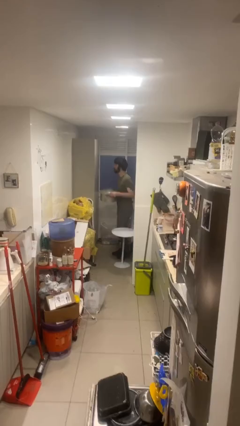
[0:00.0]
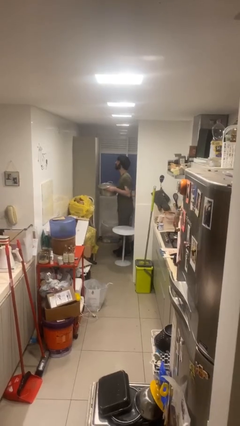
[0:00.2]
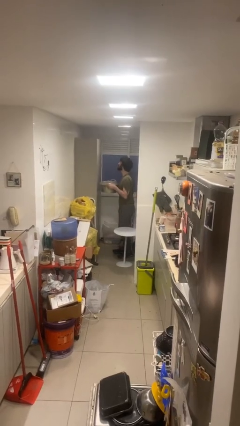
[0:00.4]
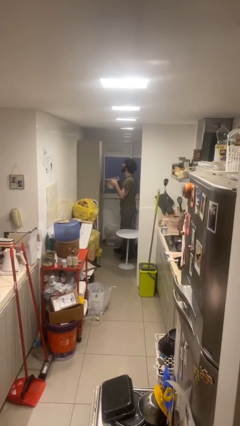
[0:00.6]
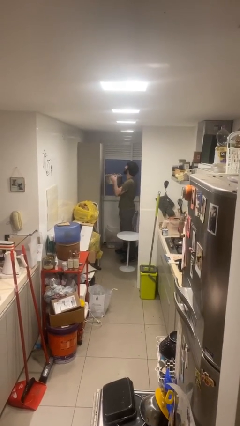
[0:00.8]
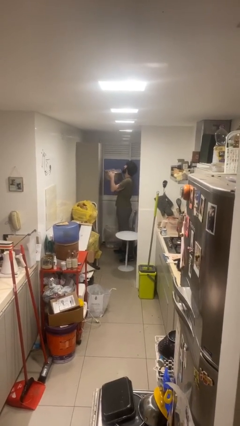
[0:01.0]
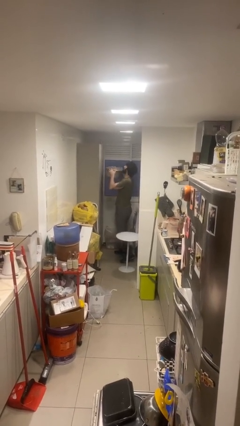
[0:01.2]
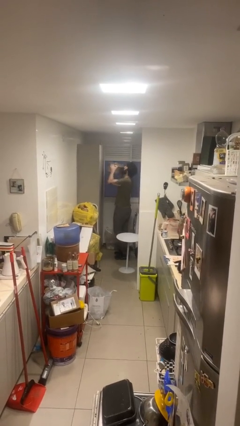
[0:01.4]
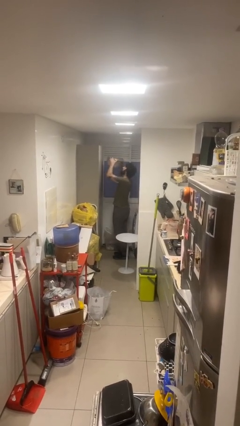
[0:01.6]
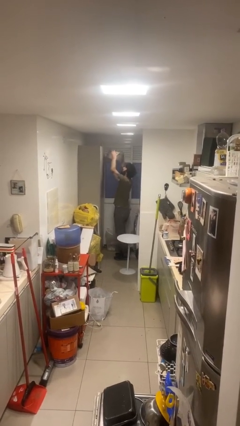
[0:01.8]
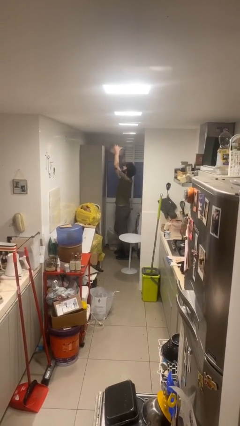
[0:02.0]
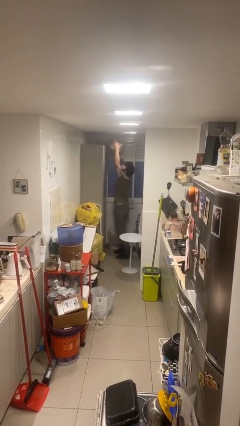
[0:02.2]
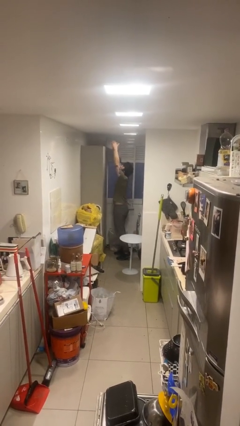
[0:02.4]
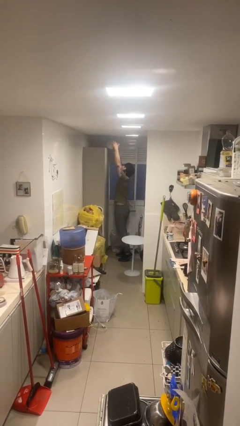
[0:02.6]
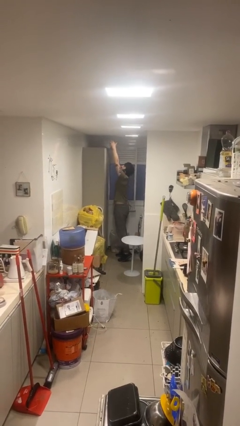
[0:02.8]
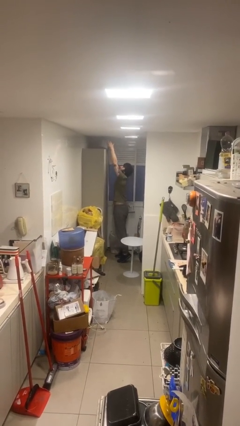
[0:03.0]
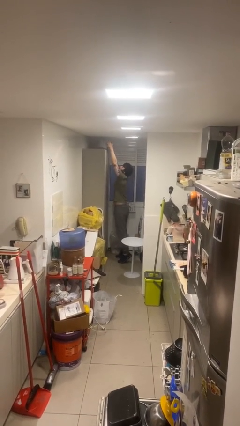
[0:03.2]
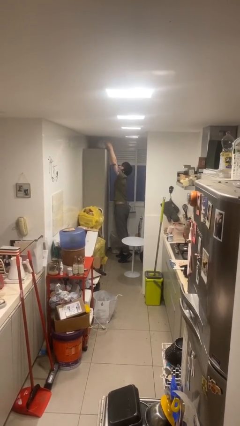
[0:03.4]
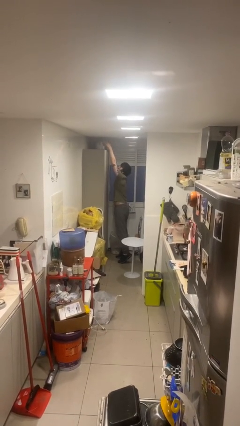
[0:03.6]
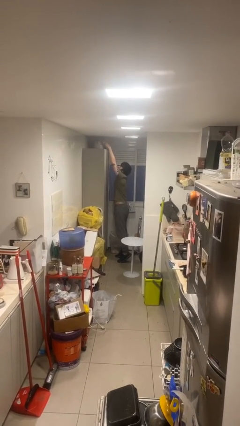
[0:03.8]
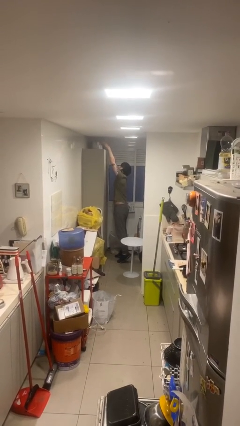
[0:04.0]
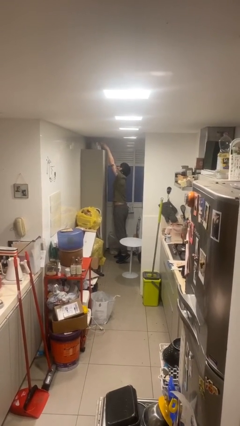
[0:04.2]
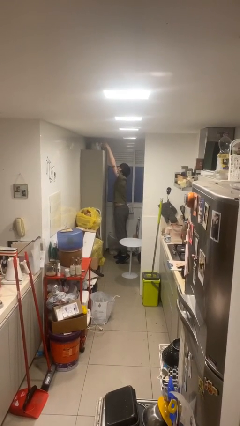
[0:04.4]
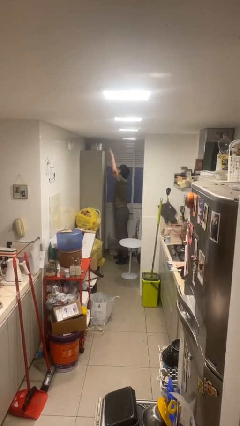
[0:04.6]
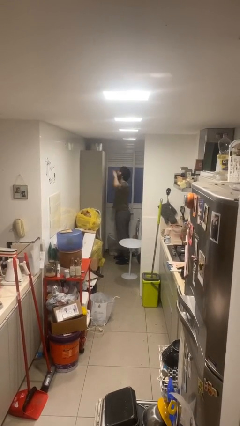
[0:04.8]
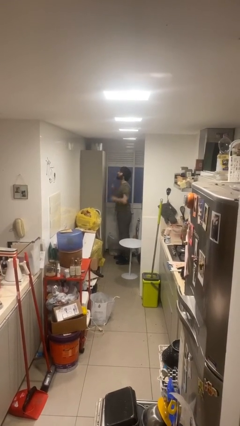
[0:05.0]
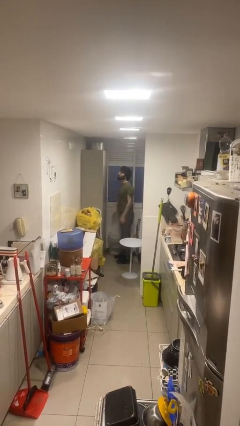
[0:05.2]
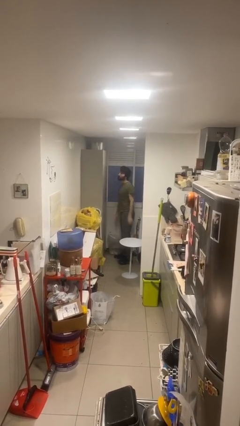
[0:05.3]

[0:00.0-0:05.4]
person puts down object on shelf

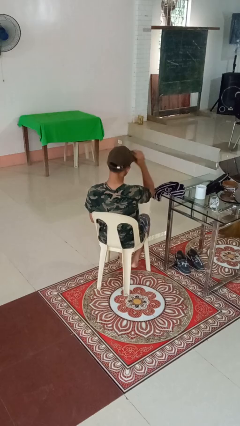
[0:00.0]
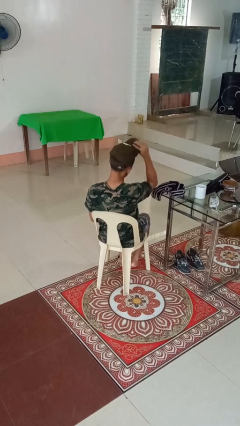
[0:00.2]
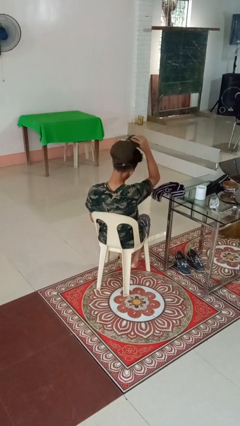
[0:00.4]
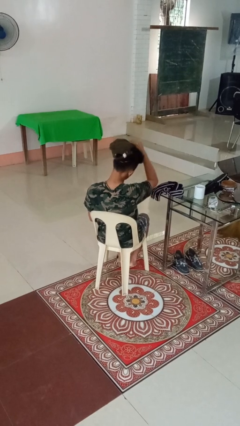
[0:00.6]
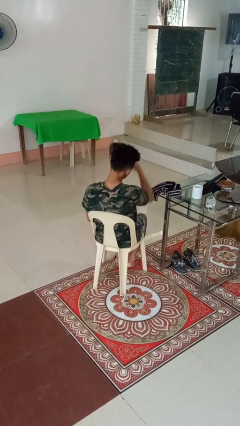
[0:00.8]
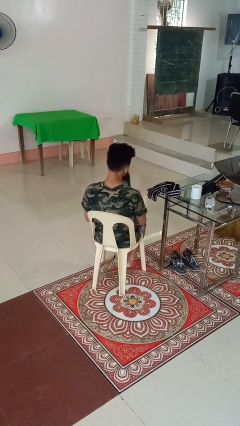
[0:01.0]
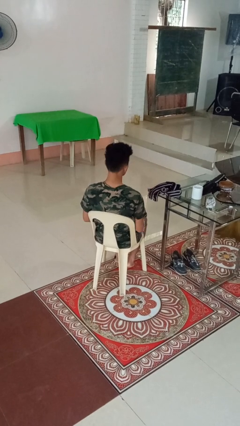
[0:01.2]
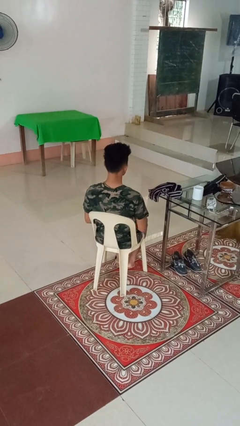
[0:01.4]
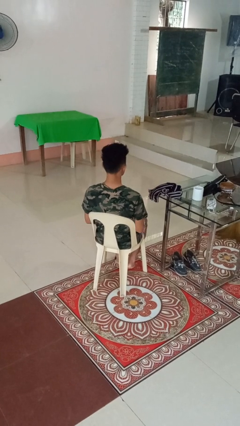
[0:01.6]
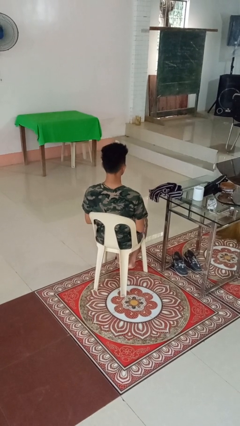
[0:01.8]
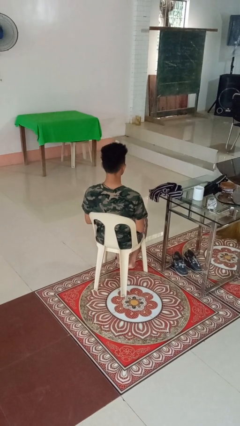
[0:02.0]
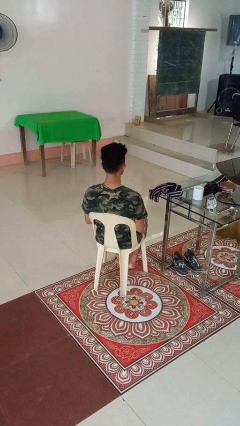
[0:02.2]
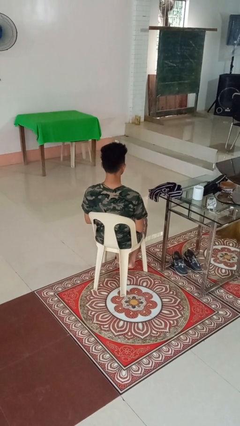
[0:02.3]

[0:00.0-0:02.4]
person takes off hat

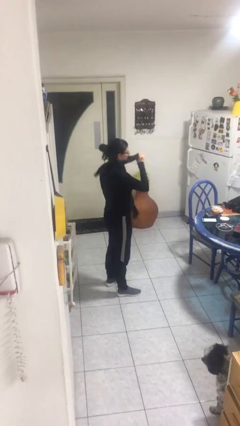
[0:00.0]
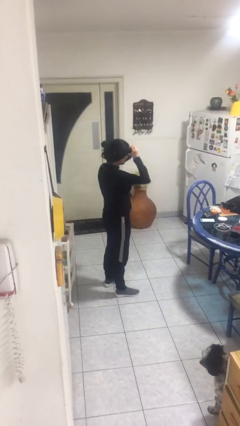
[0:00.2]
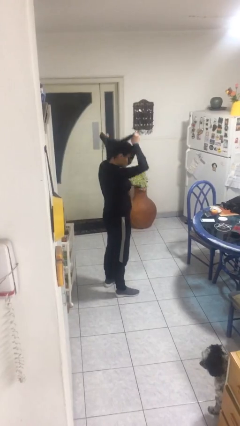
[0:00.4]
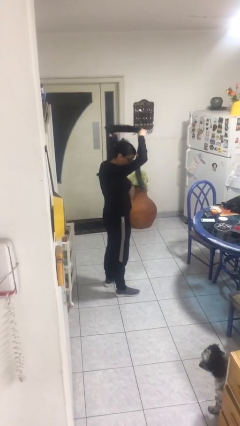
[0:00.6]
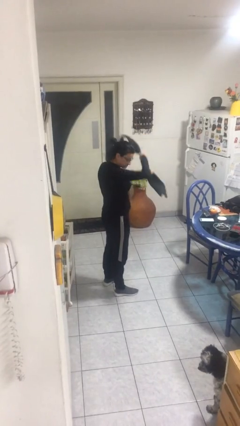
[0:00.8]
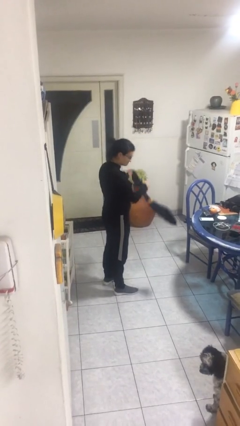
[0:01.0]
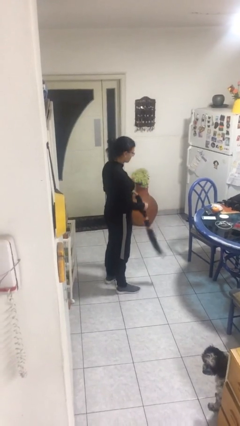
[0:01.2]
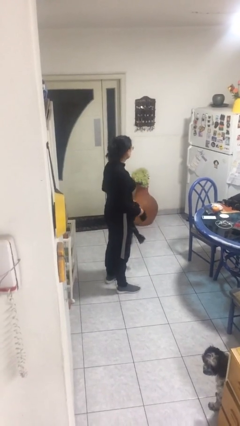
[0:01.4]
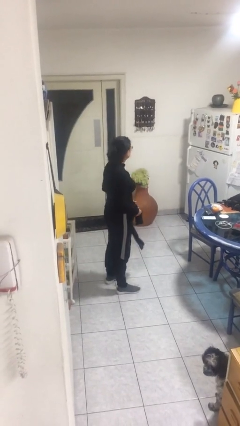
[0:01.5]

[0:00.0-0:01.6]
person takes off scarf

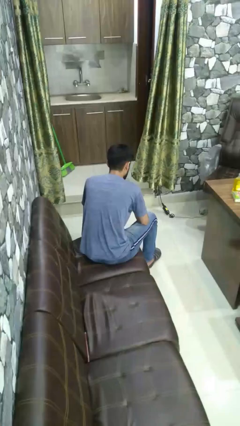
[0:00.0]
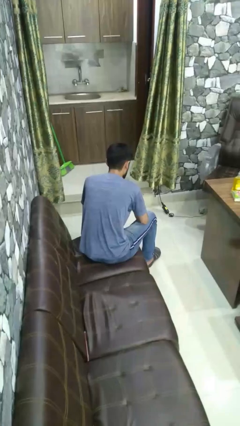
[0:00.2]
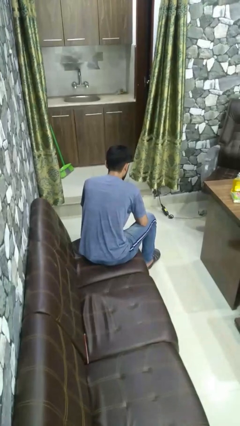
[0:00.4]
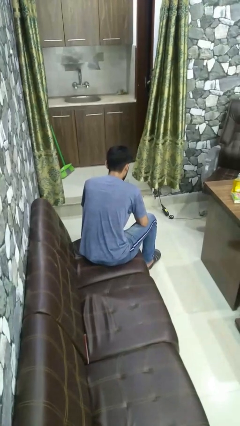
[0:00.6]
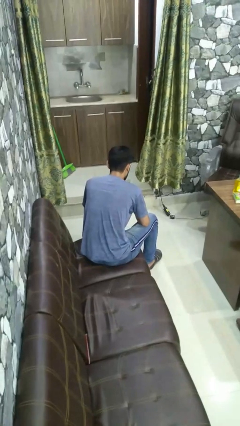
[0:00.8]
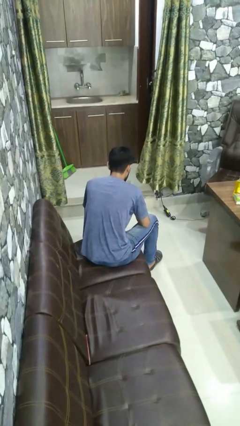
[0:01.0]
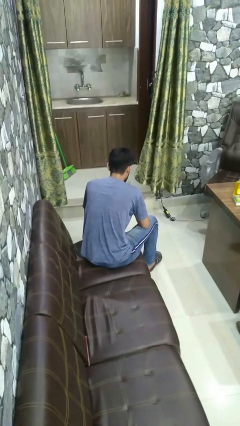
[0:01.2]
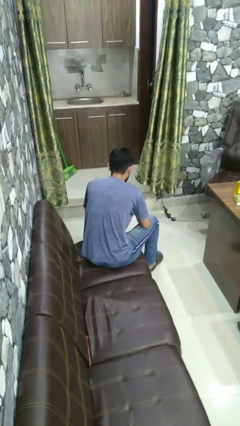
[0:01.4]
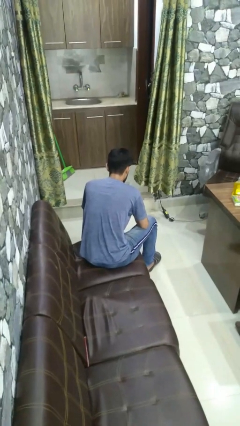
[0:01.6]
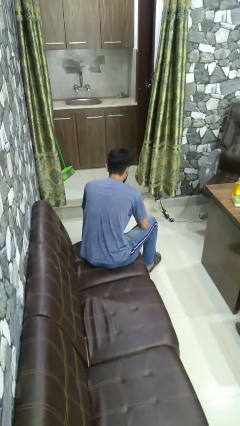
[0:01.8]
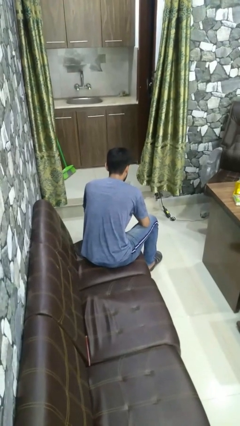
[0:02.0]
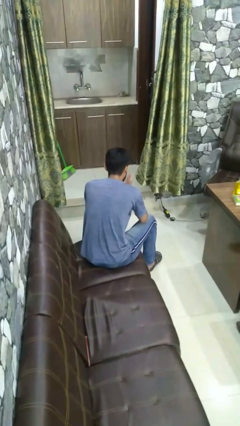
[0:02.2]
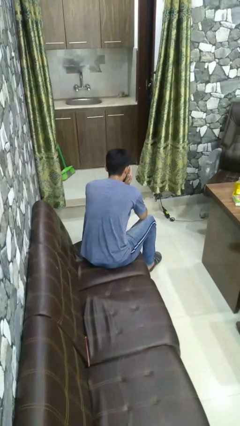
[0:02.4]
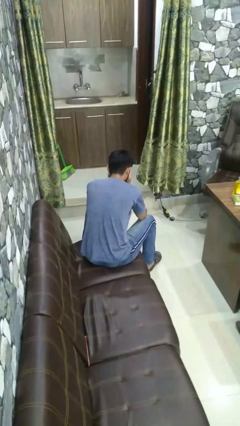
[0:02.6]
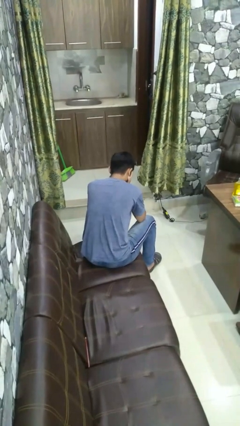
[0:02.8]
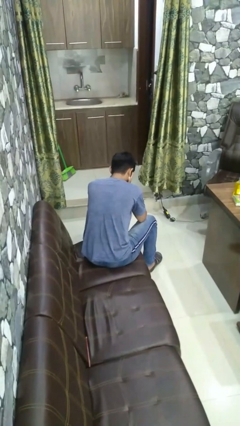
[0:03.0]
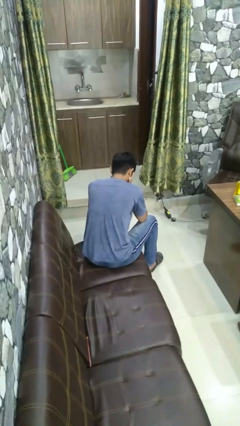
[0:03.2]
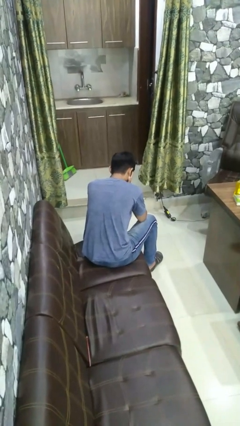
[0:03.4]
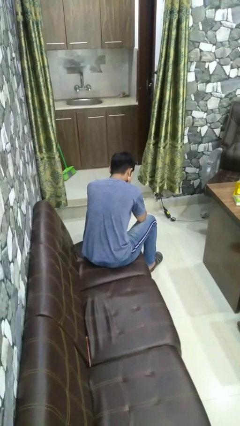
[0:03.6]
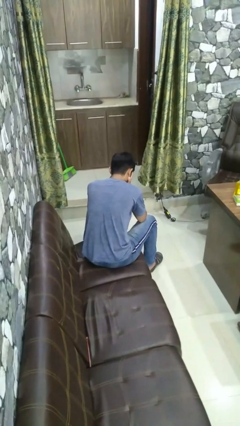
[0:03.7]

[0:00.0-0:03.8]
person covers face with hands

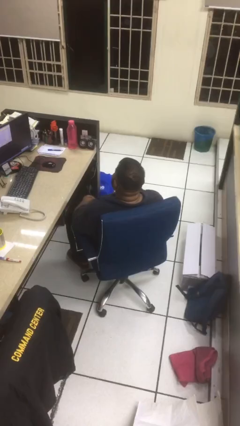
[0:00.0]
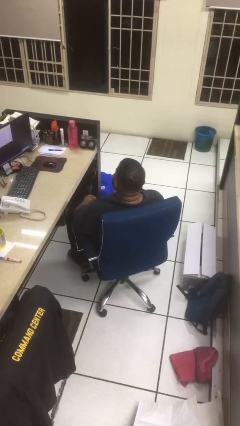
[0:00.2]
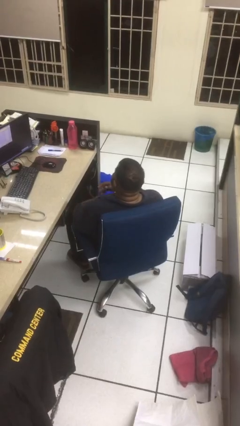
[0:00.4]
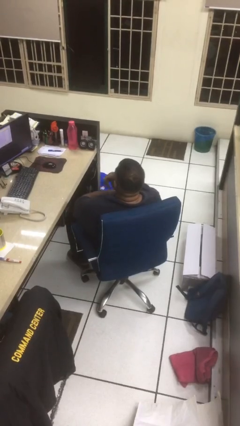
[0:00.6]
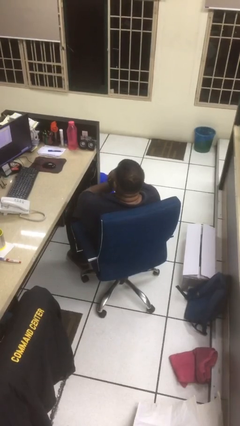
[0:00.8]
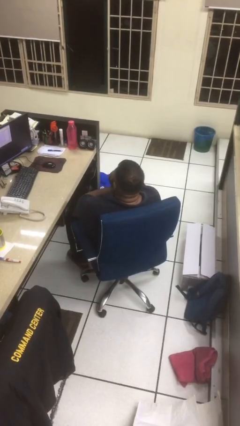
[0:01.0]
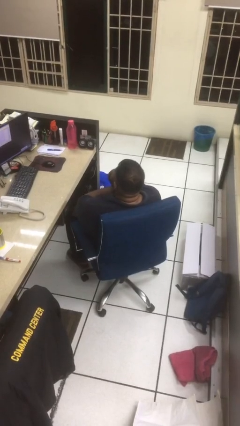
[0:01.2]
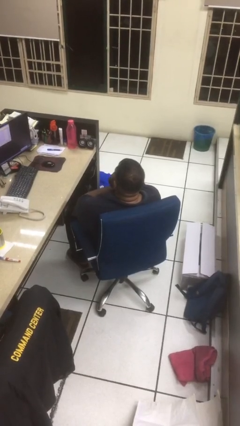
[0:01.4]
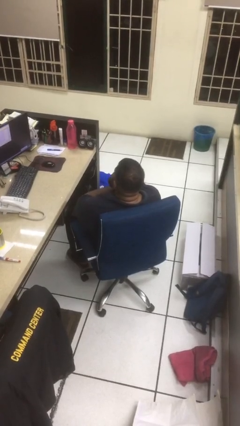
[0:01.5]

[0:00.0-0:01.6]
person strokes chin

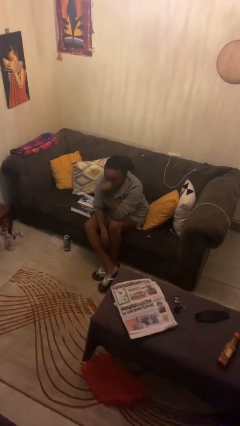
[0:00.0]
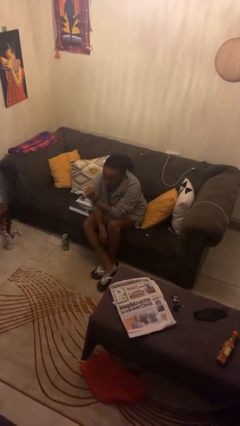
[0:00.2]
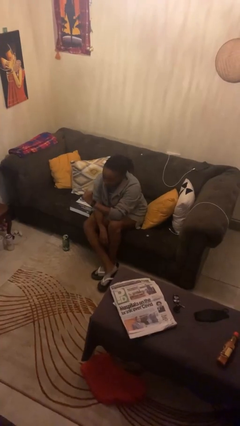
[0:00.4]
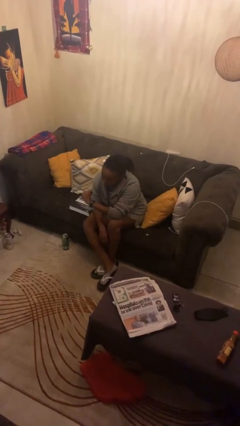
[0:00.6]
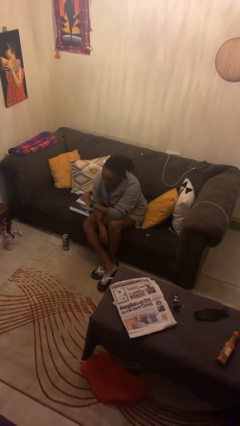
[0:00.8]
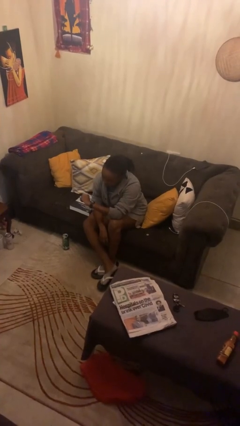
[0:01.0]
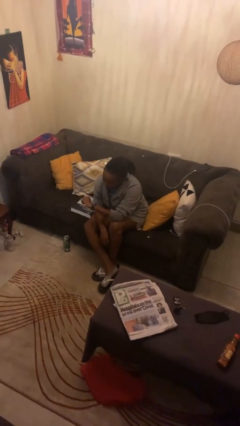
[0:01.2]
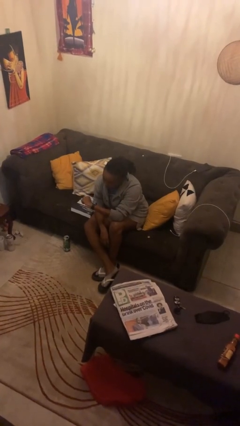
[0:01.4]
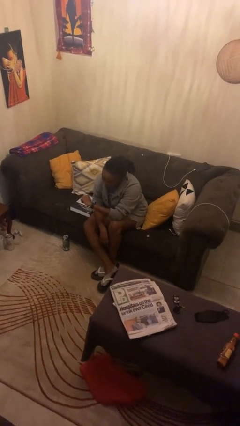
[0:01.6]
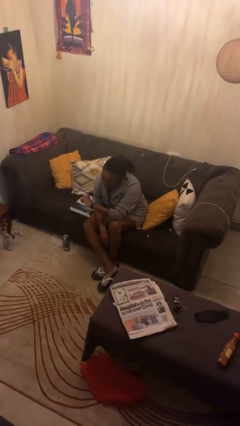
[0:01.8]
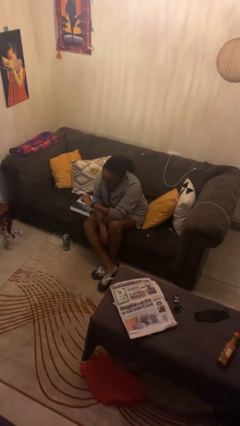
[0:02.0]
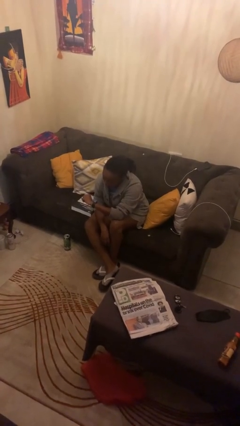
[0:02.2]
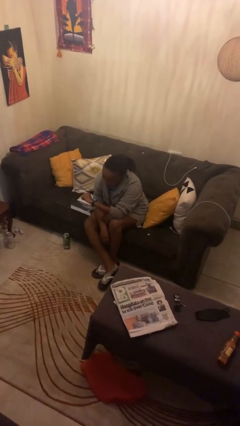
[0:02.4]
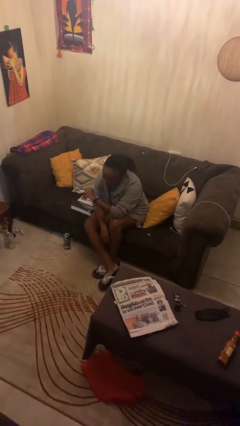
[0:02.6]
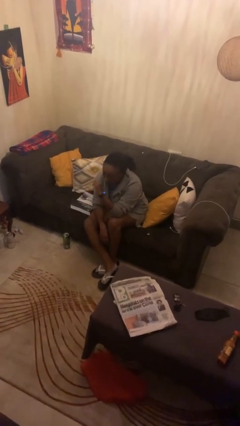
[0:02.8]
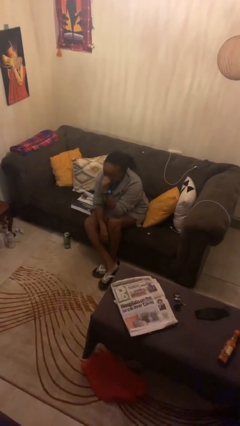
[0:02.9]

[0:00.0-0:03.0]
person looks at wristwatch
